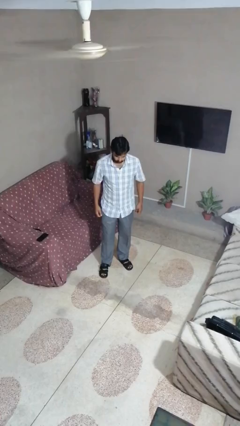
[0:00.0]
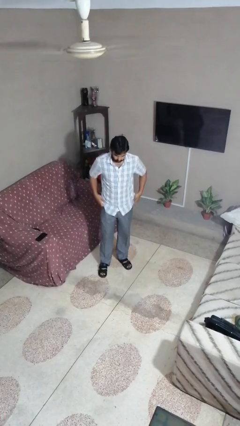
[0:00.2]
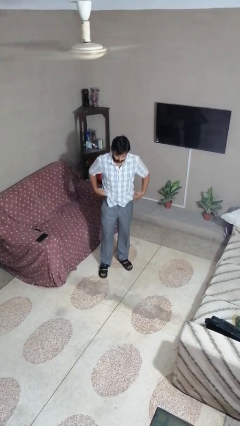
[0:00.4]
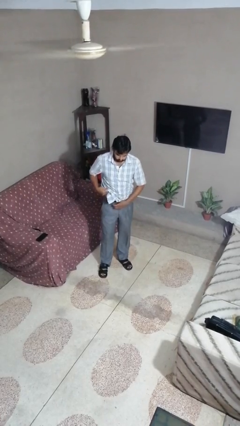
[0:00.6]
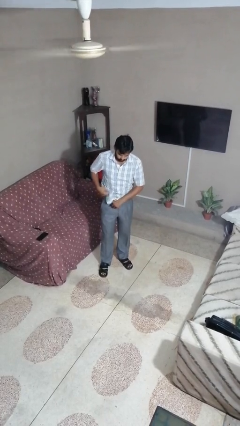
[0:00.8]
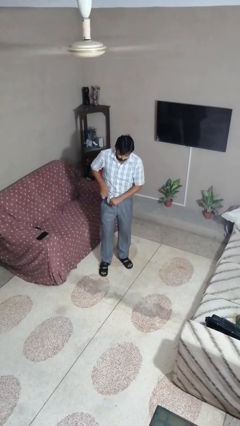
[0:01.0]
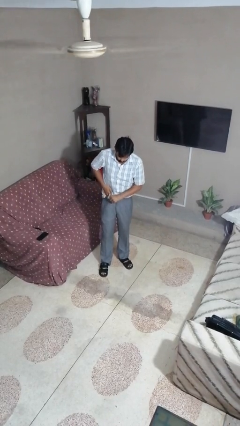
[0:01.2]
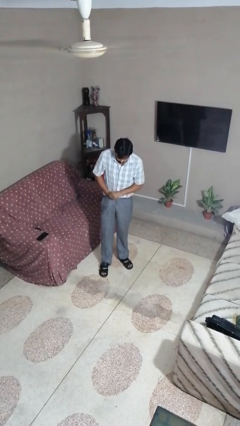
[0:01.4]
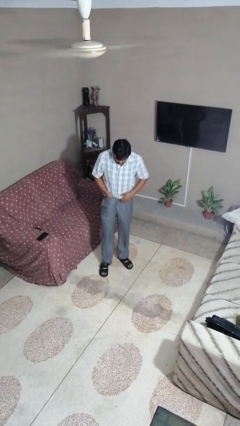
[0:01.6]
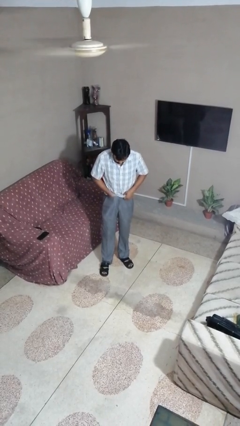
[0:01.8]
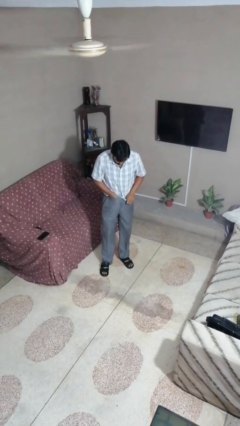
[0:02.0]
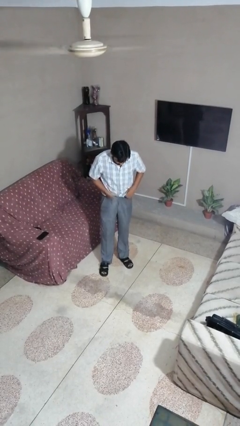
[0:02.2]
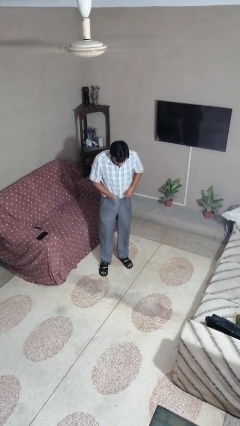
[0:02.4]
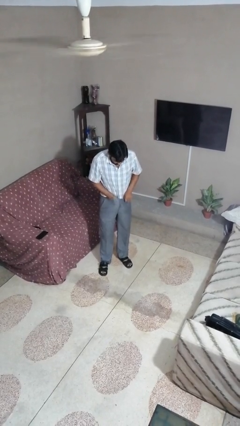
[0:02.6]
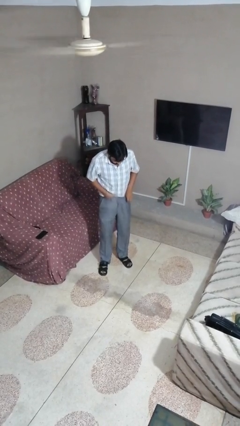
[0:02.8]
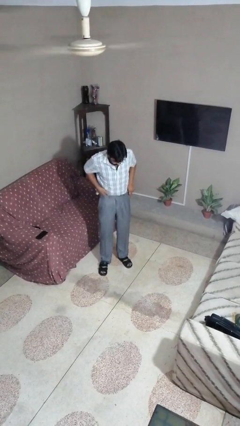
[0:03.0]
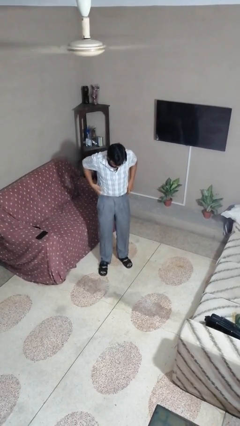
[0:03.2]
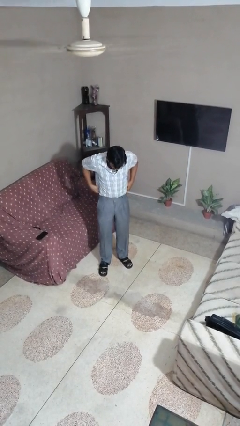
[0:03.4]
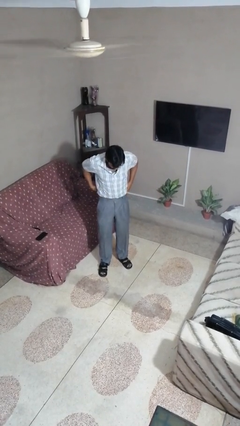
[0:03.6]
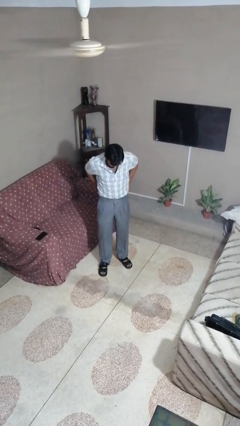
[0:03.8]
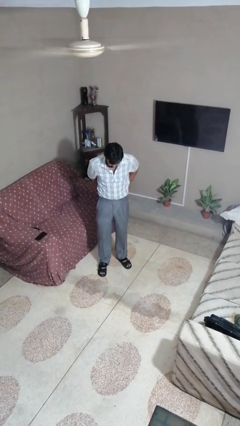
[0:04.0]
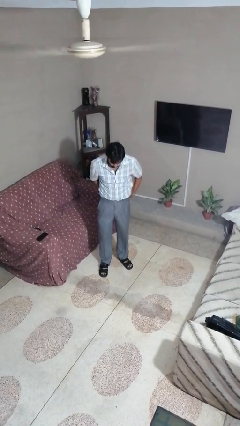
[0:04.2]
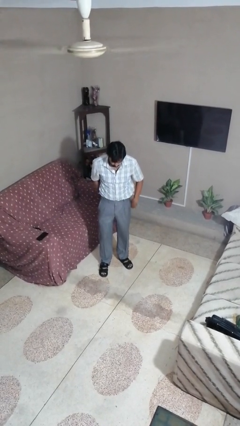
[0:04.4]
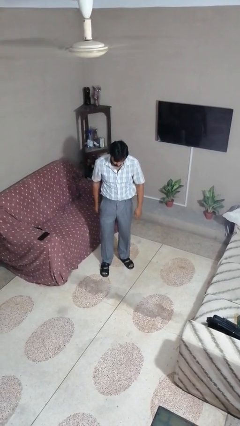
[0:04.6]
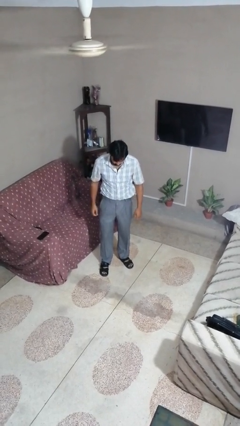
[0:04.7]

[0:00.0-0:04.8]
person tucks in shirt

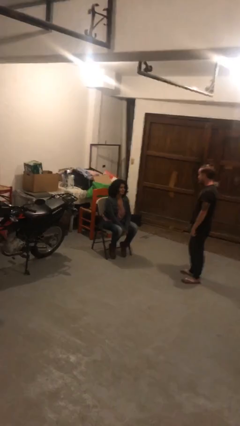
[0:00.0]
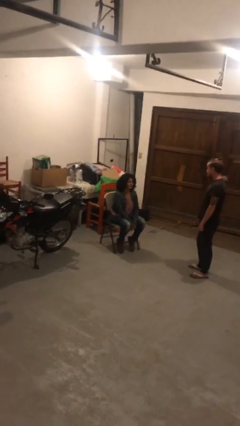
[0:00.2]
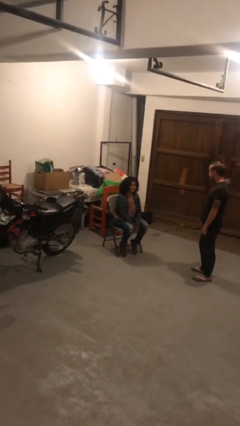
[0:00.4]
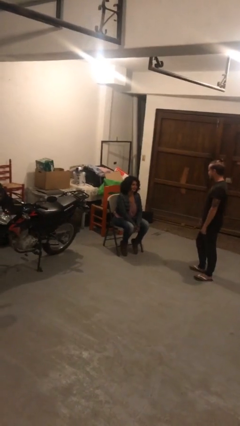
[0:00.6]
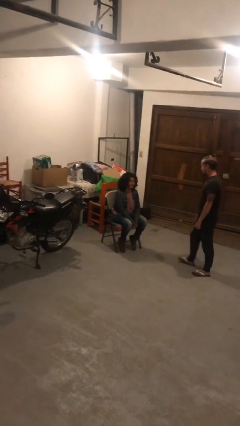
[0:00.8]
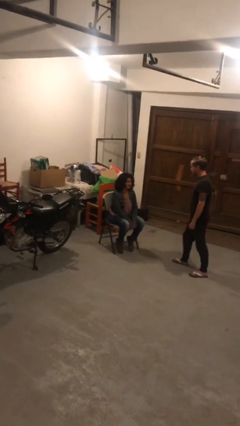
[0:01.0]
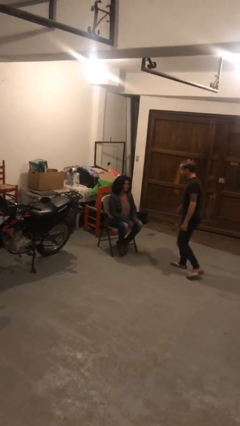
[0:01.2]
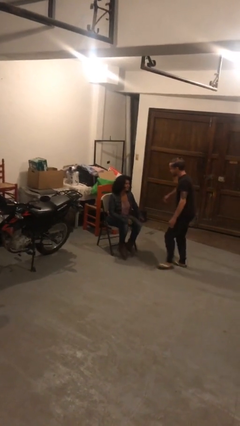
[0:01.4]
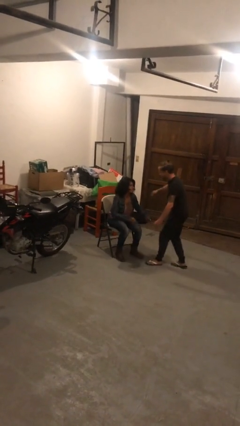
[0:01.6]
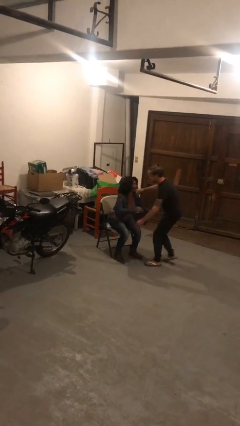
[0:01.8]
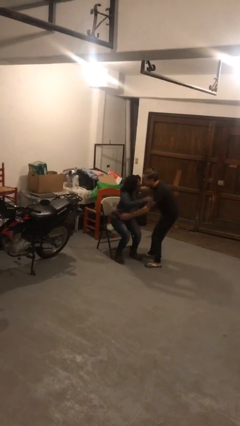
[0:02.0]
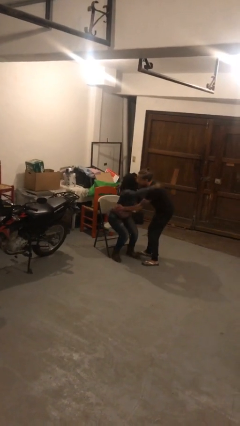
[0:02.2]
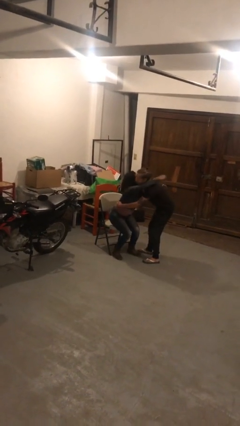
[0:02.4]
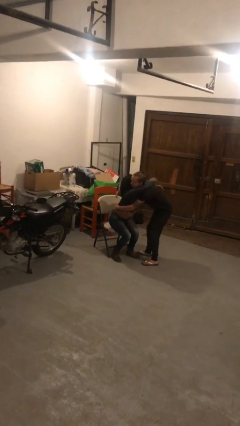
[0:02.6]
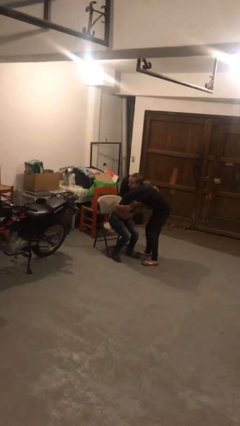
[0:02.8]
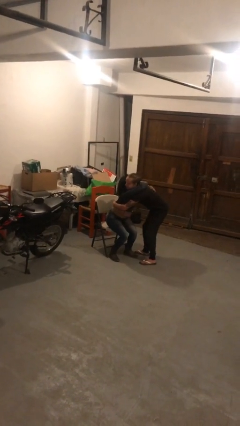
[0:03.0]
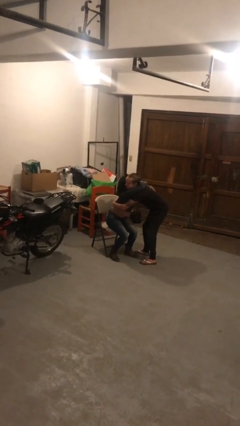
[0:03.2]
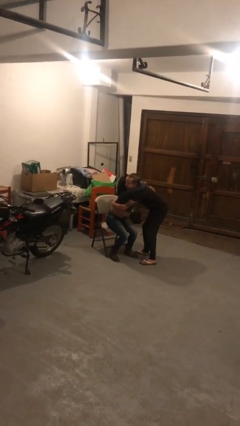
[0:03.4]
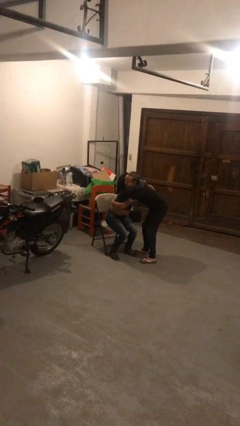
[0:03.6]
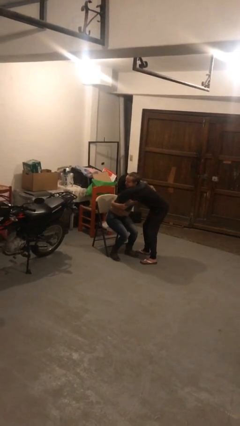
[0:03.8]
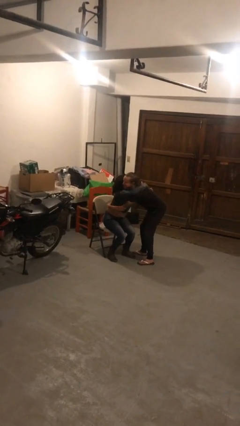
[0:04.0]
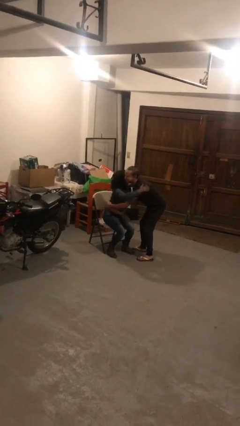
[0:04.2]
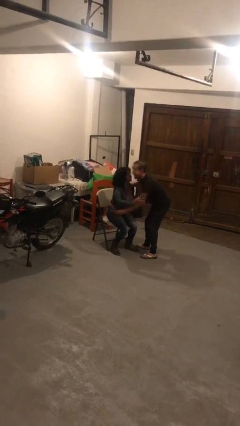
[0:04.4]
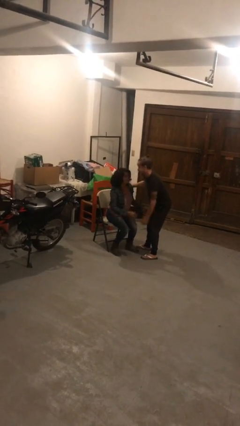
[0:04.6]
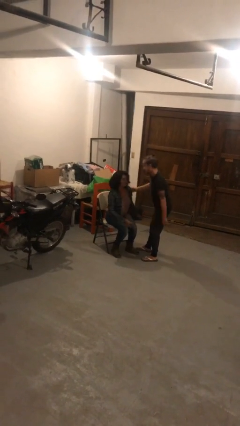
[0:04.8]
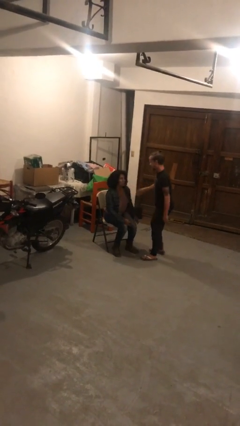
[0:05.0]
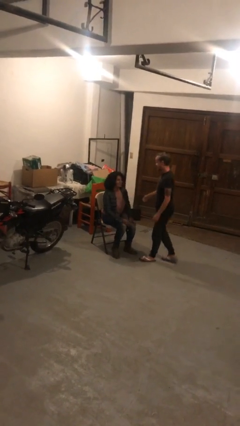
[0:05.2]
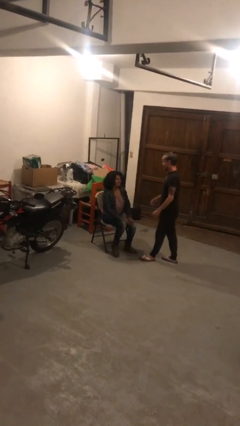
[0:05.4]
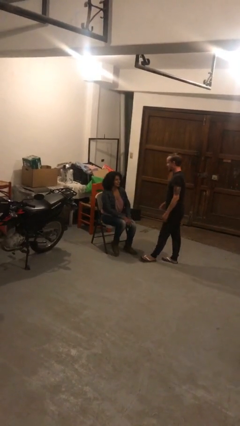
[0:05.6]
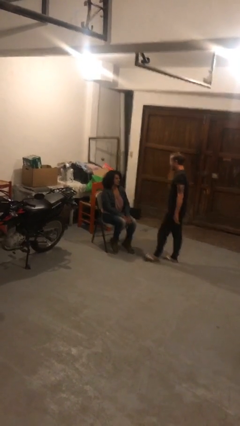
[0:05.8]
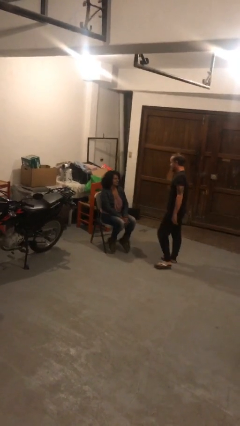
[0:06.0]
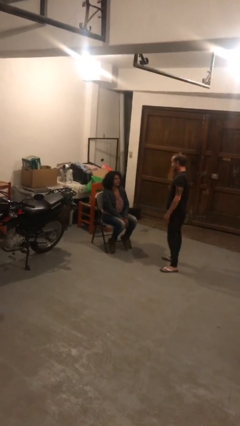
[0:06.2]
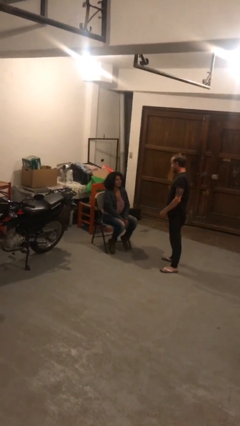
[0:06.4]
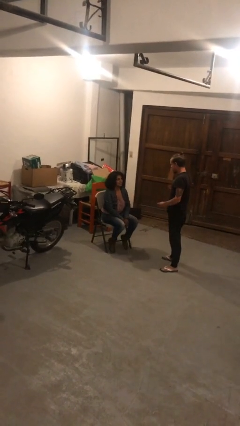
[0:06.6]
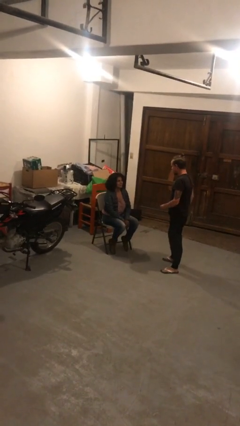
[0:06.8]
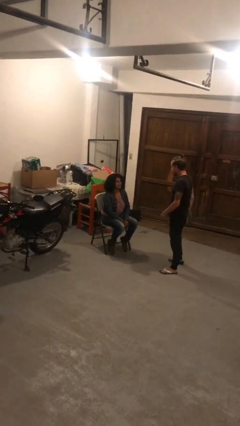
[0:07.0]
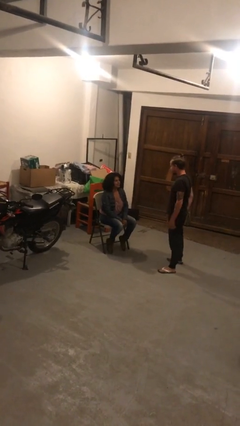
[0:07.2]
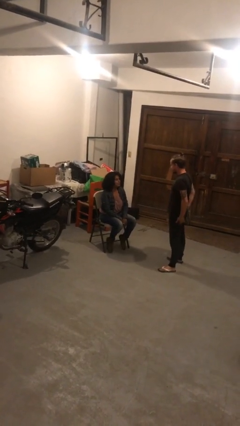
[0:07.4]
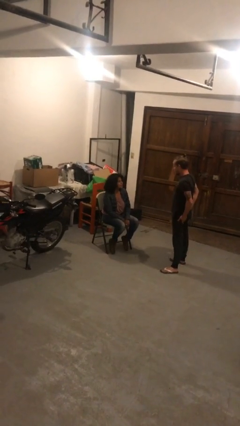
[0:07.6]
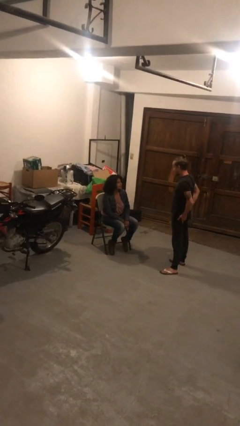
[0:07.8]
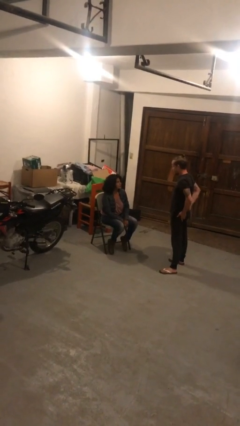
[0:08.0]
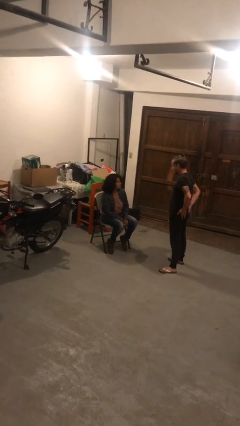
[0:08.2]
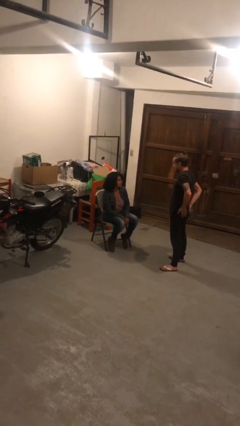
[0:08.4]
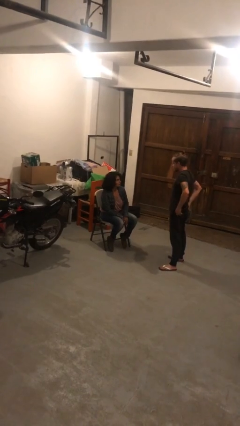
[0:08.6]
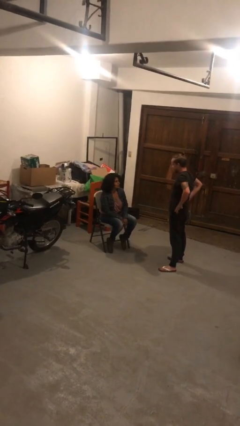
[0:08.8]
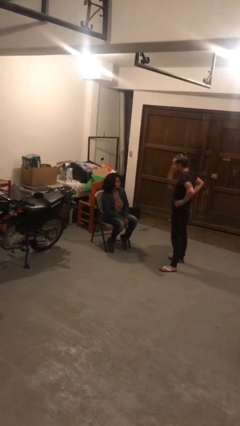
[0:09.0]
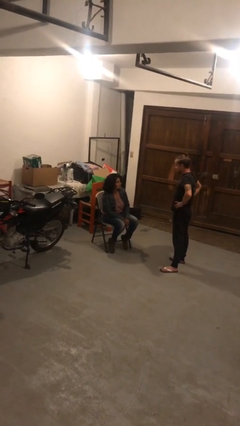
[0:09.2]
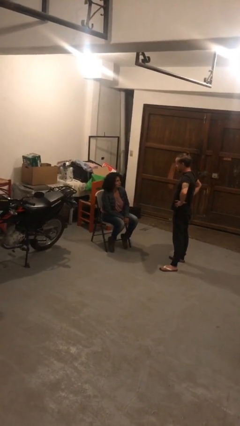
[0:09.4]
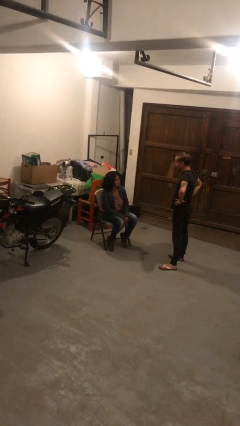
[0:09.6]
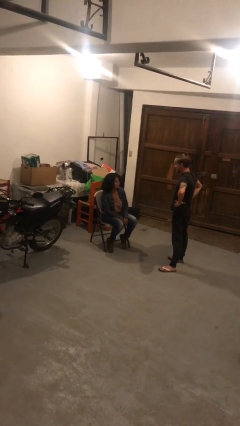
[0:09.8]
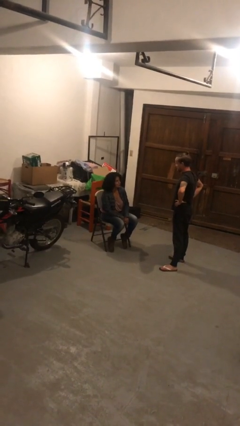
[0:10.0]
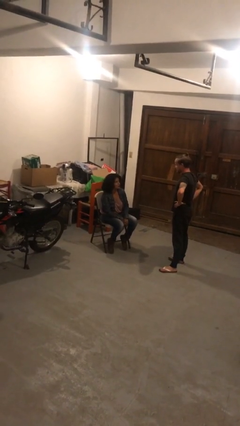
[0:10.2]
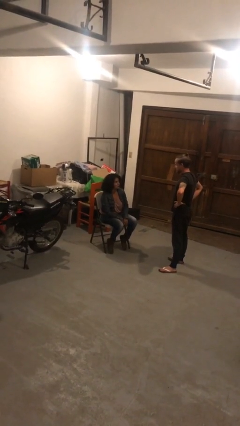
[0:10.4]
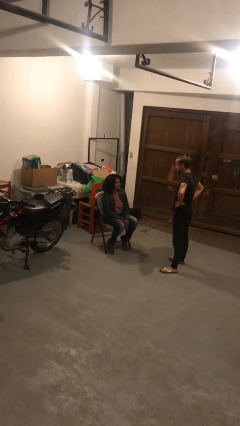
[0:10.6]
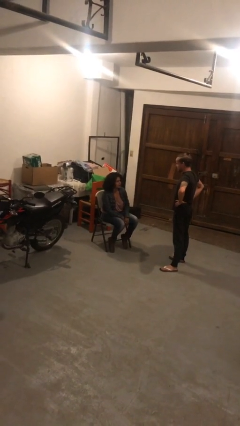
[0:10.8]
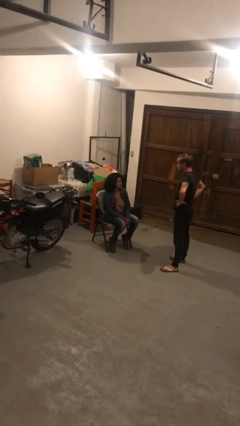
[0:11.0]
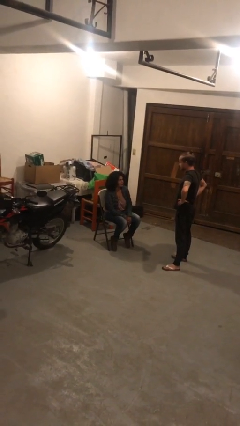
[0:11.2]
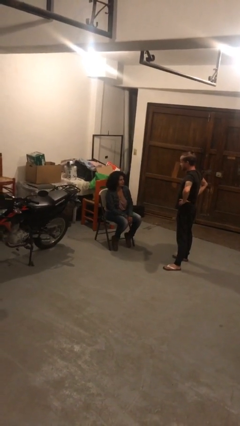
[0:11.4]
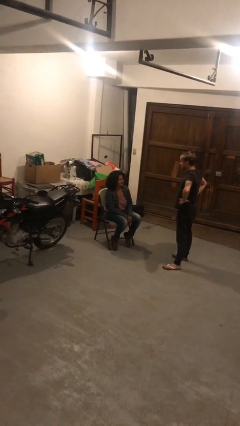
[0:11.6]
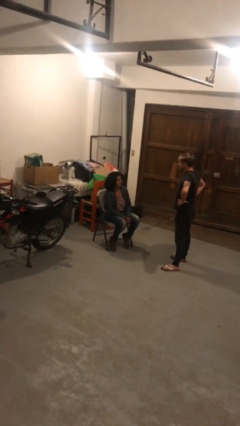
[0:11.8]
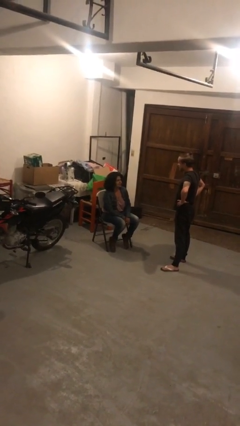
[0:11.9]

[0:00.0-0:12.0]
person embraces person

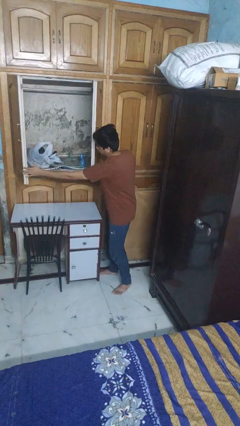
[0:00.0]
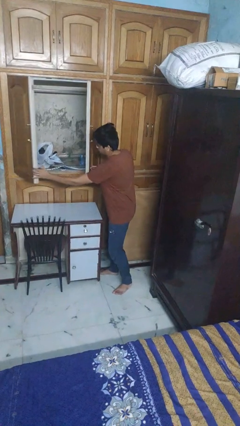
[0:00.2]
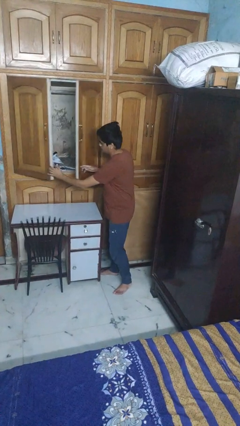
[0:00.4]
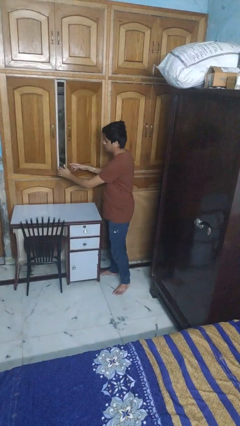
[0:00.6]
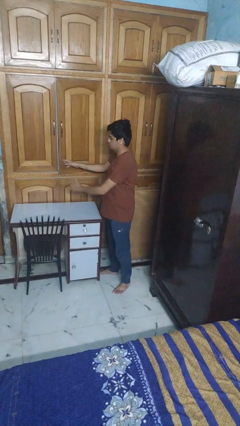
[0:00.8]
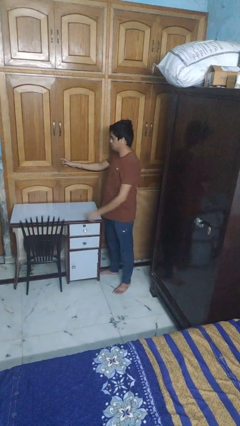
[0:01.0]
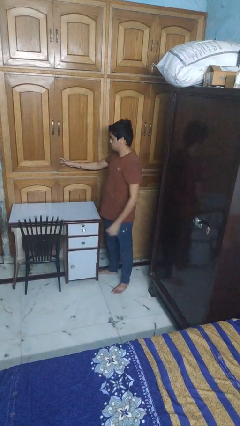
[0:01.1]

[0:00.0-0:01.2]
person closes closet door
